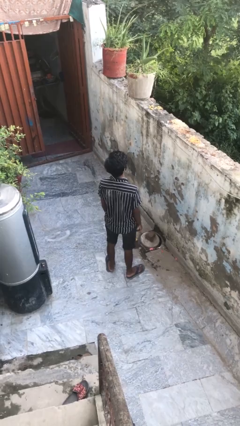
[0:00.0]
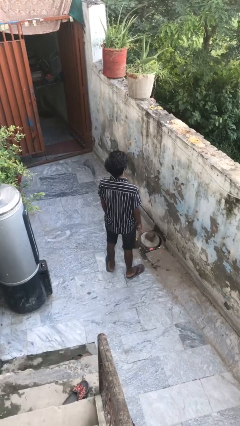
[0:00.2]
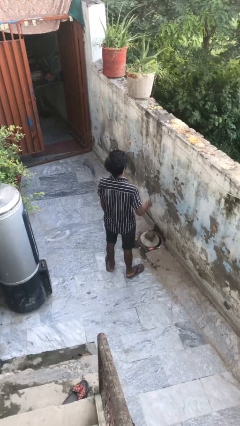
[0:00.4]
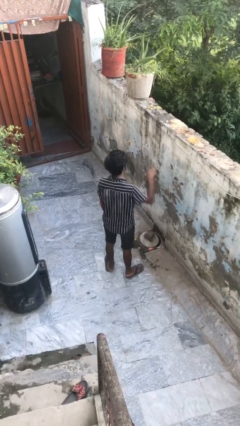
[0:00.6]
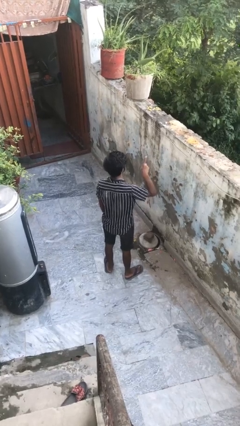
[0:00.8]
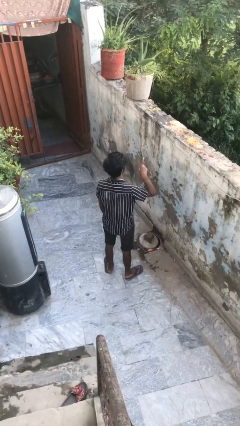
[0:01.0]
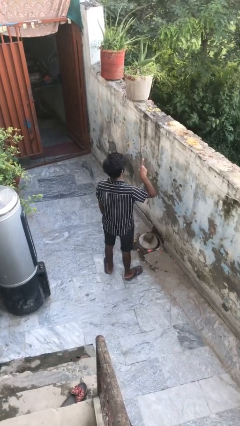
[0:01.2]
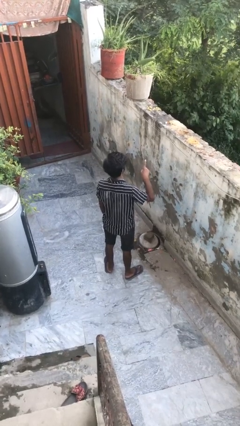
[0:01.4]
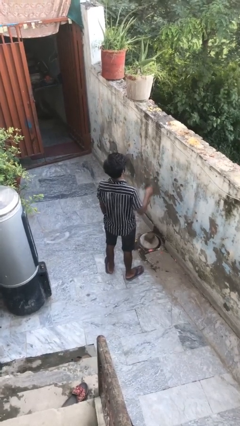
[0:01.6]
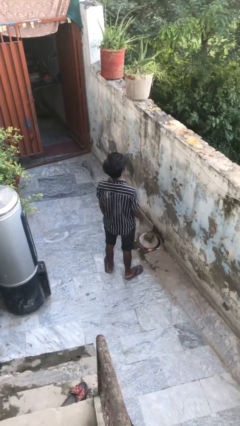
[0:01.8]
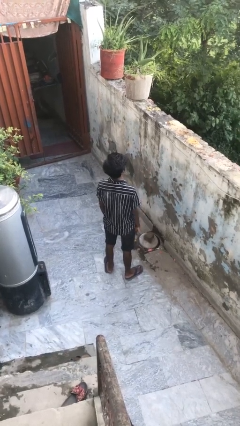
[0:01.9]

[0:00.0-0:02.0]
person gestures number one

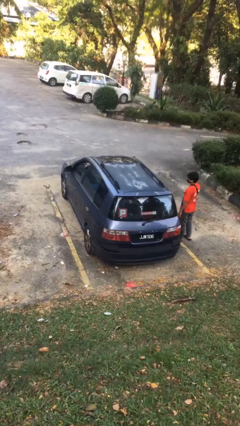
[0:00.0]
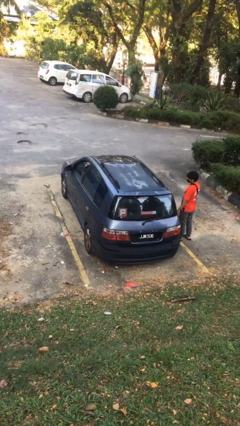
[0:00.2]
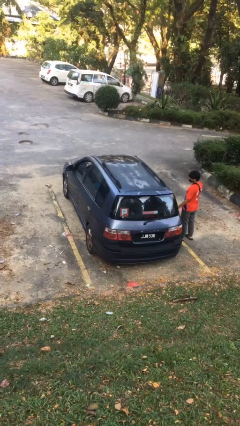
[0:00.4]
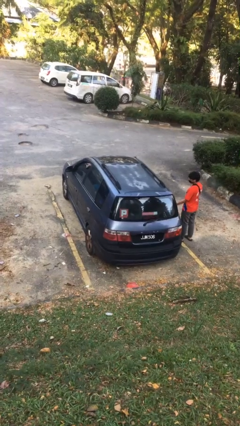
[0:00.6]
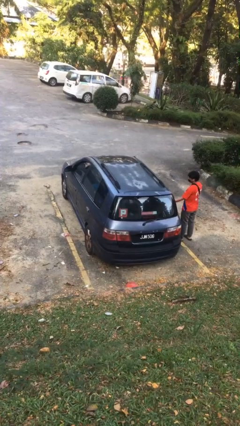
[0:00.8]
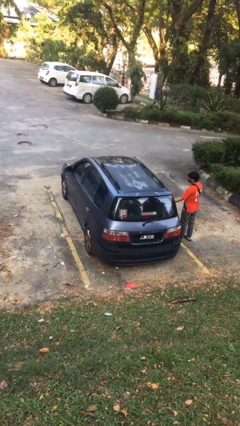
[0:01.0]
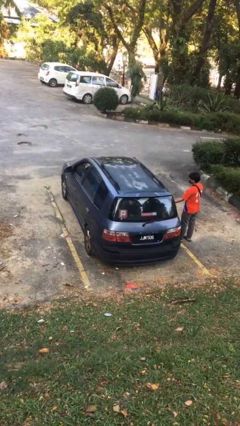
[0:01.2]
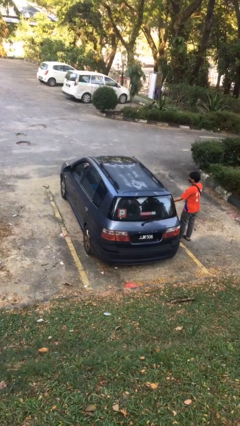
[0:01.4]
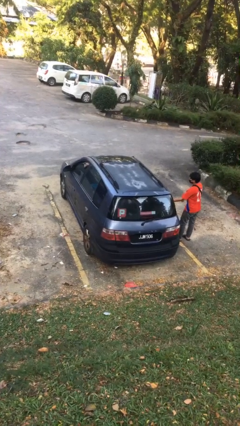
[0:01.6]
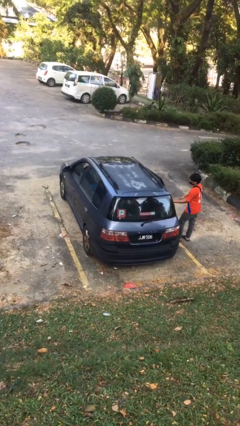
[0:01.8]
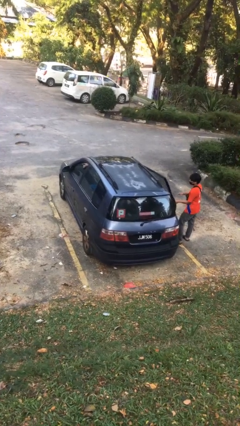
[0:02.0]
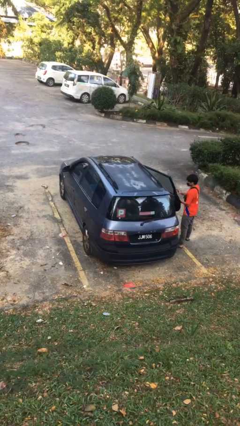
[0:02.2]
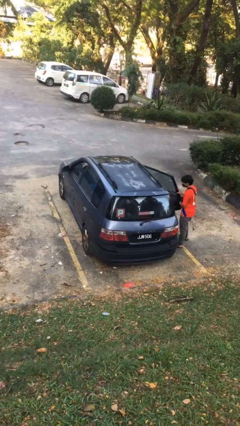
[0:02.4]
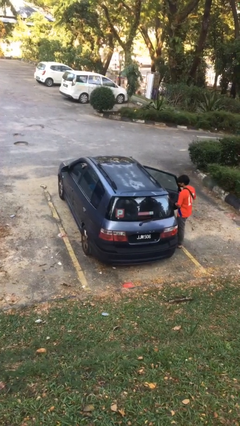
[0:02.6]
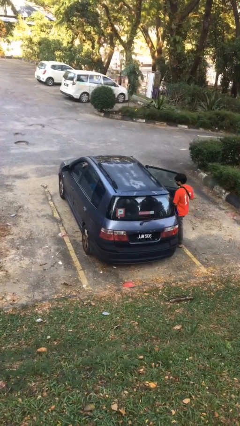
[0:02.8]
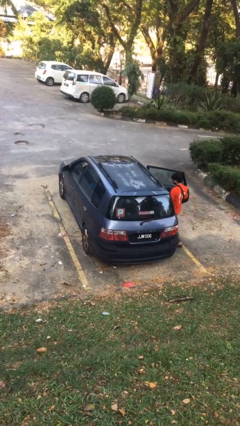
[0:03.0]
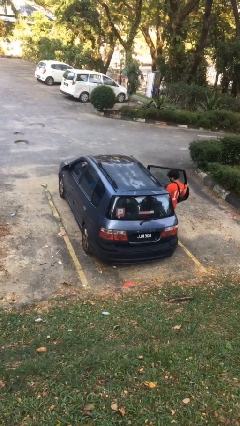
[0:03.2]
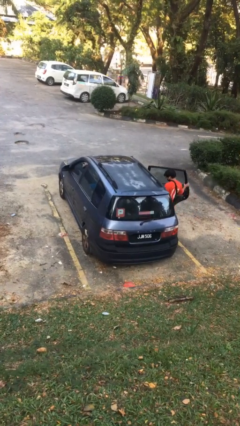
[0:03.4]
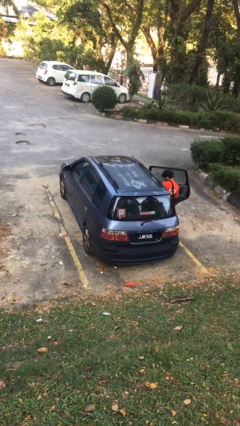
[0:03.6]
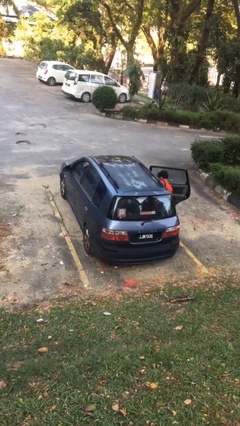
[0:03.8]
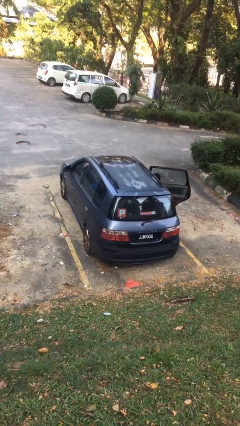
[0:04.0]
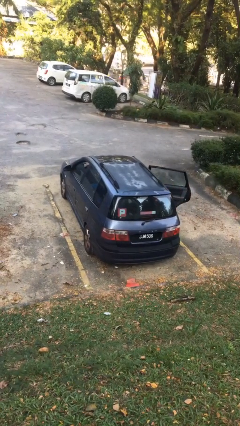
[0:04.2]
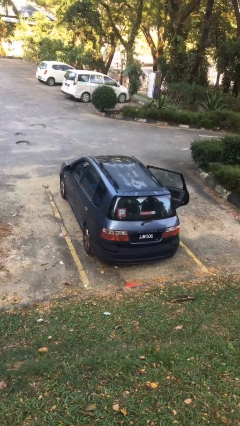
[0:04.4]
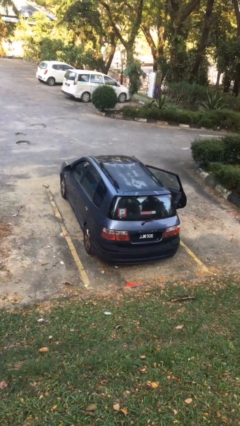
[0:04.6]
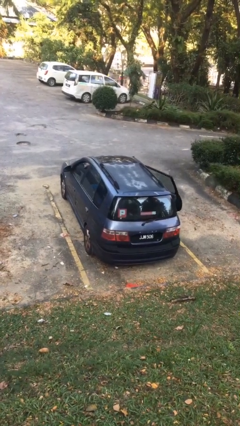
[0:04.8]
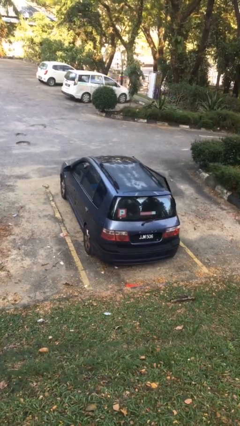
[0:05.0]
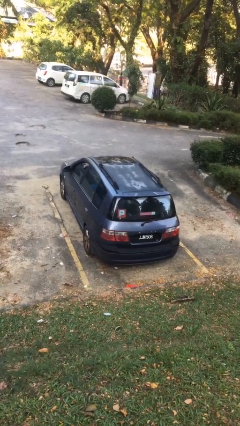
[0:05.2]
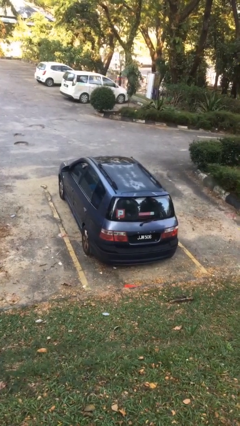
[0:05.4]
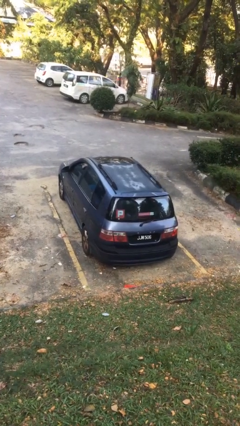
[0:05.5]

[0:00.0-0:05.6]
car picks up person

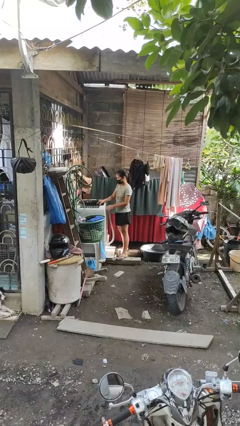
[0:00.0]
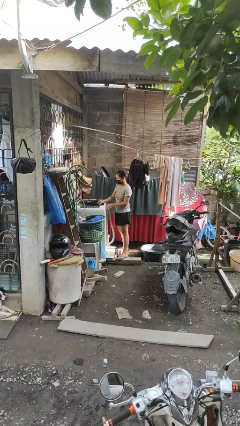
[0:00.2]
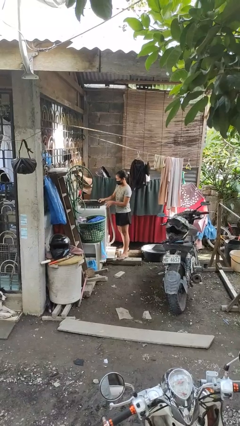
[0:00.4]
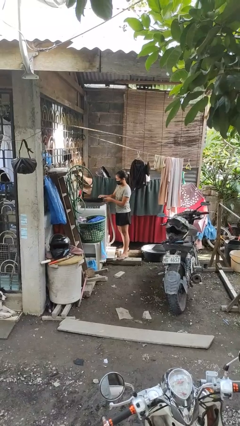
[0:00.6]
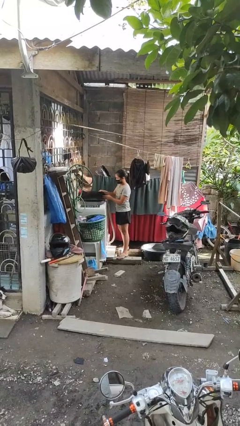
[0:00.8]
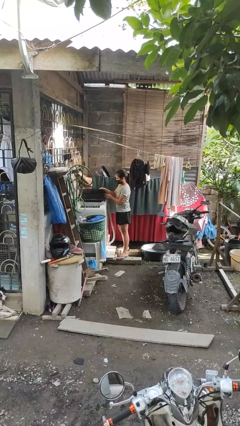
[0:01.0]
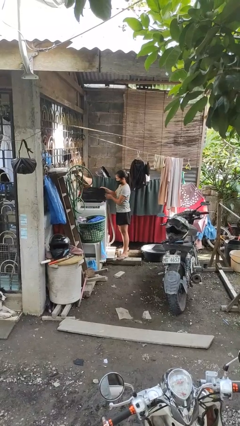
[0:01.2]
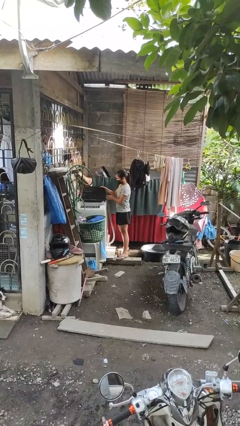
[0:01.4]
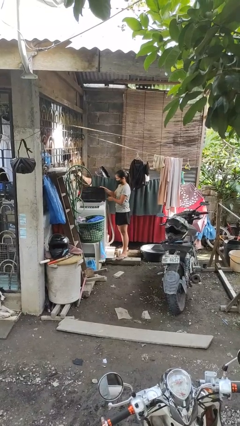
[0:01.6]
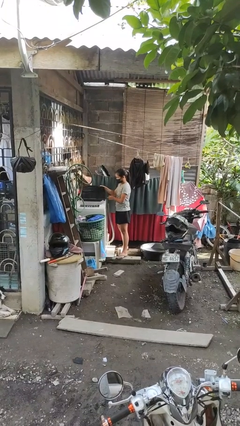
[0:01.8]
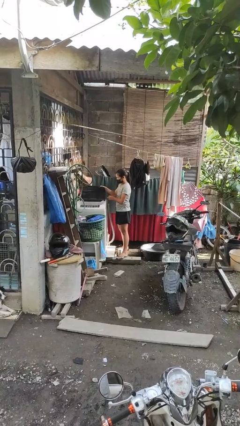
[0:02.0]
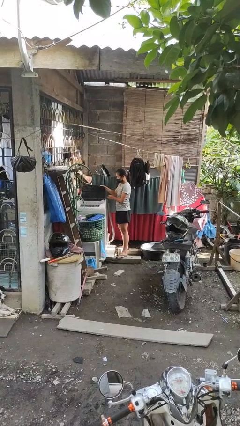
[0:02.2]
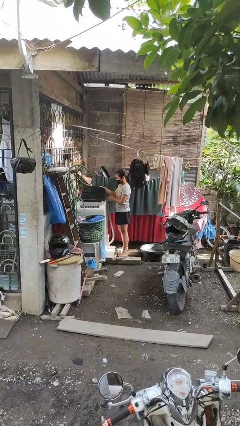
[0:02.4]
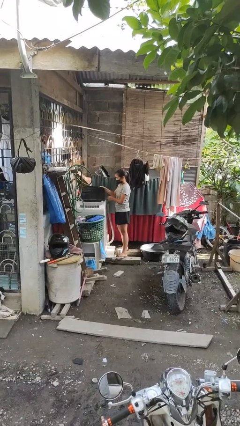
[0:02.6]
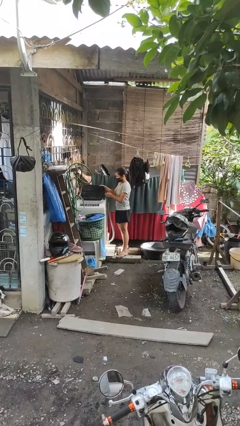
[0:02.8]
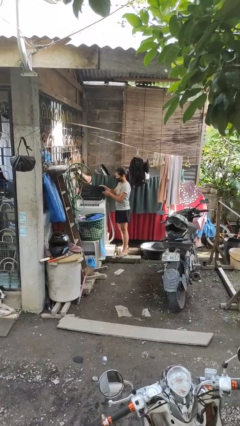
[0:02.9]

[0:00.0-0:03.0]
person opens clothes washer

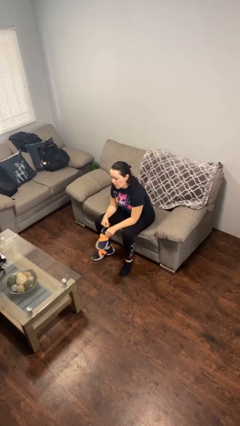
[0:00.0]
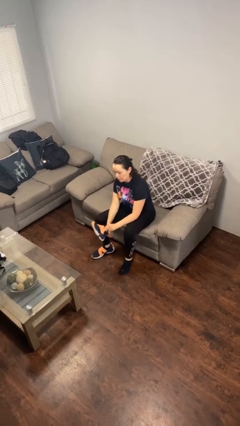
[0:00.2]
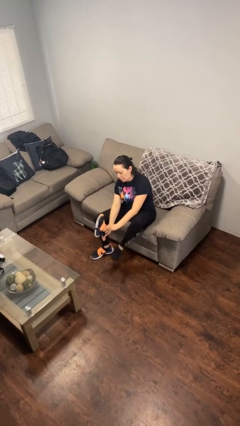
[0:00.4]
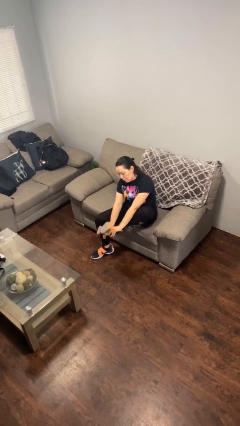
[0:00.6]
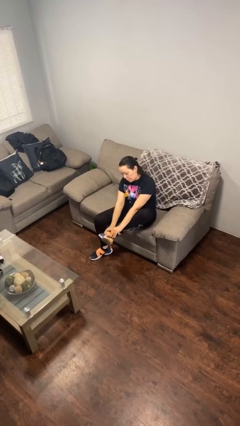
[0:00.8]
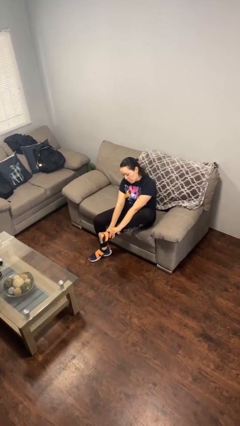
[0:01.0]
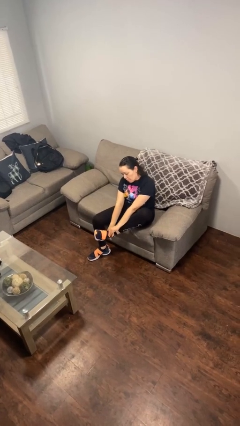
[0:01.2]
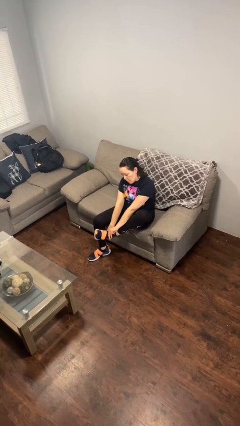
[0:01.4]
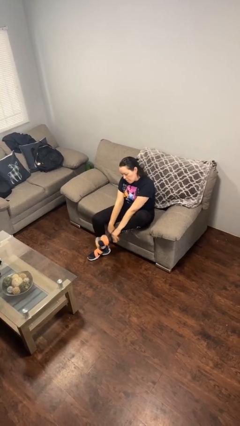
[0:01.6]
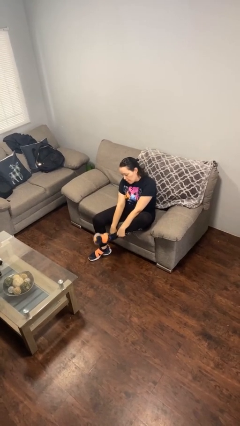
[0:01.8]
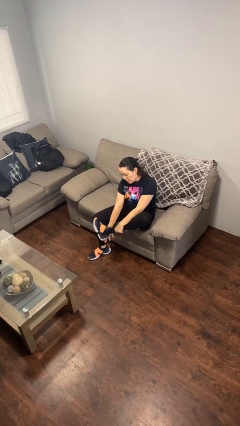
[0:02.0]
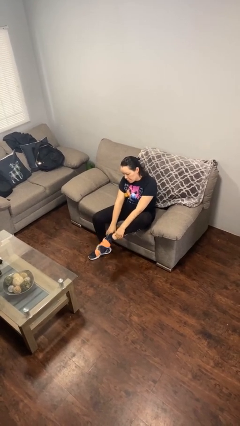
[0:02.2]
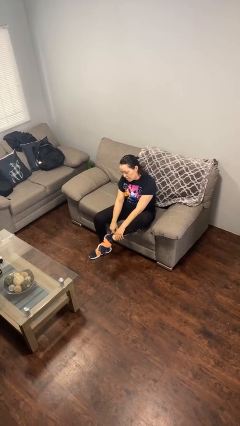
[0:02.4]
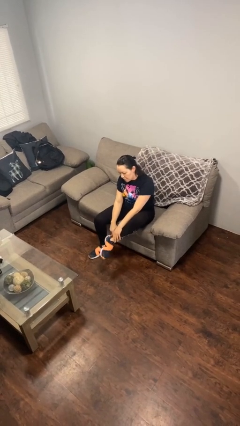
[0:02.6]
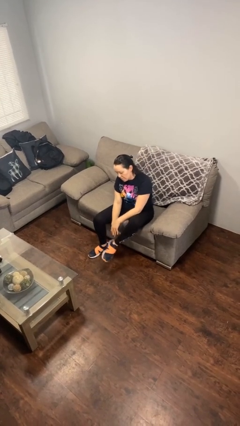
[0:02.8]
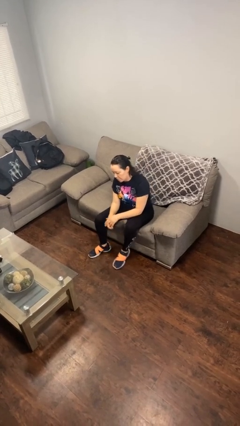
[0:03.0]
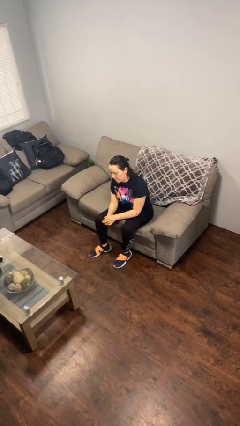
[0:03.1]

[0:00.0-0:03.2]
person puts on shoes

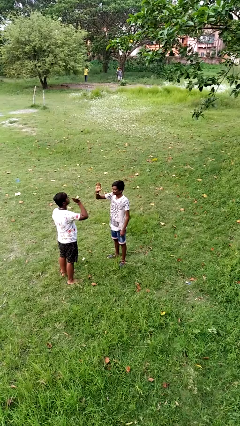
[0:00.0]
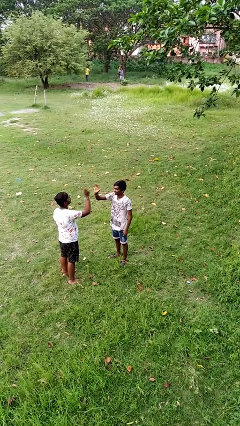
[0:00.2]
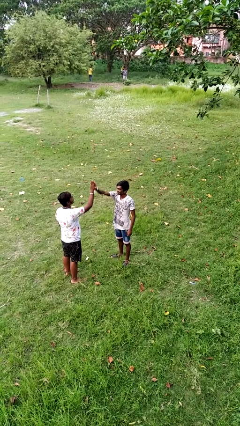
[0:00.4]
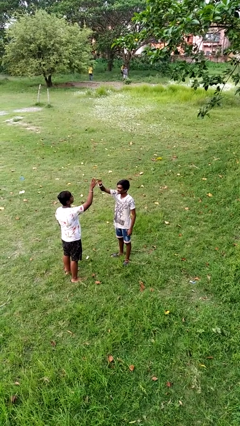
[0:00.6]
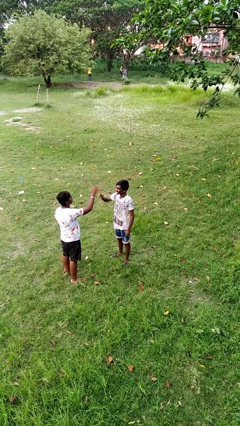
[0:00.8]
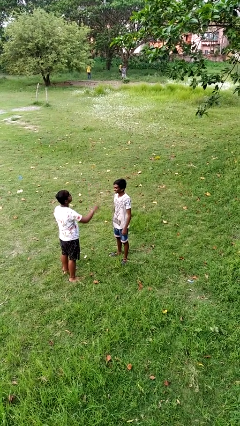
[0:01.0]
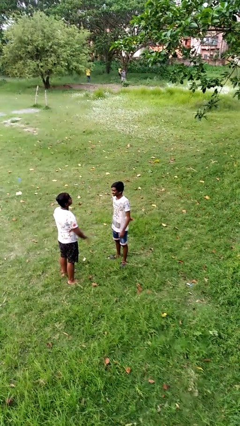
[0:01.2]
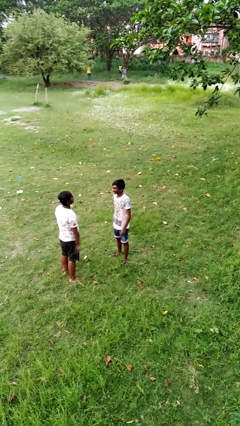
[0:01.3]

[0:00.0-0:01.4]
person highfives hand

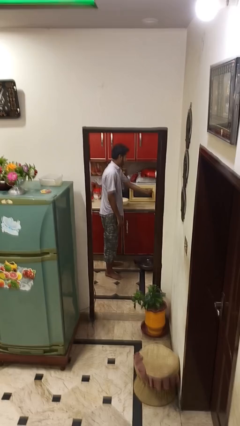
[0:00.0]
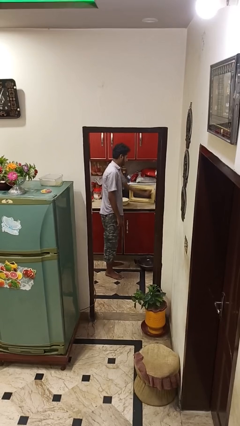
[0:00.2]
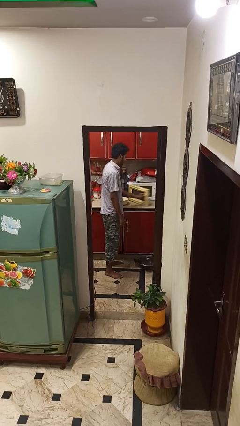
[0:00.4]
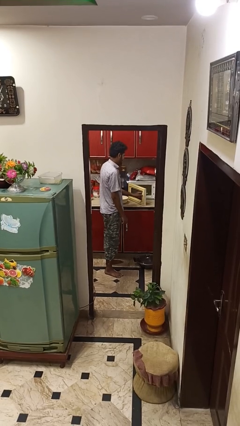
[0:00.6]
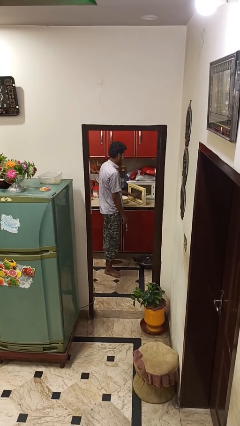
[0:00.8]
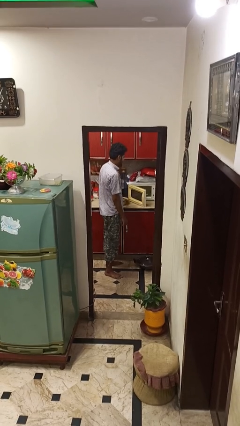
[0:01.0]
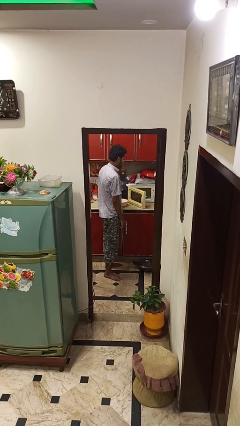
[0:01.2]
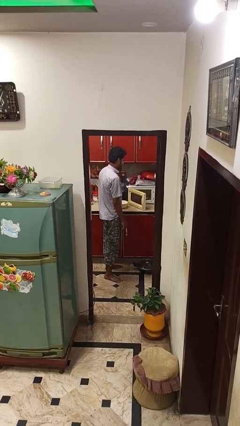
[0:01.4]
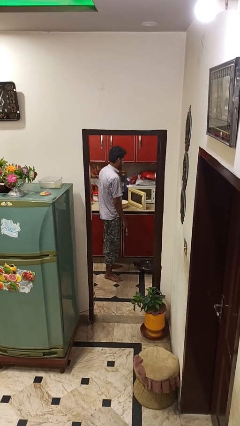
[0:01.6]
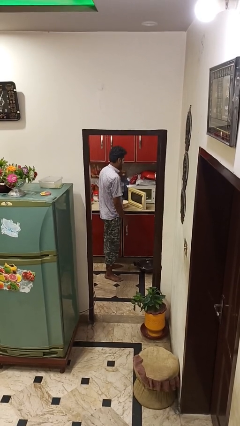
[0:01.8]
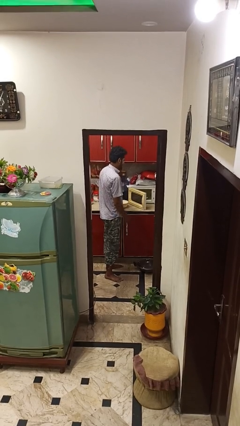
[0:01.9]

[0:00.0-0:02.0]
person opens microwave

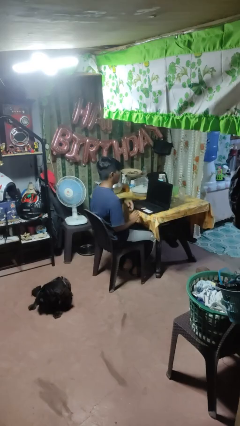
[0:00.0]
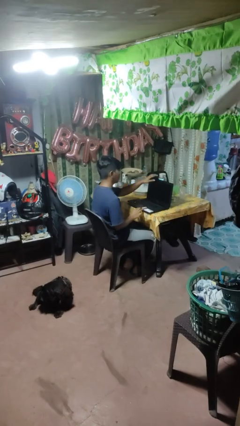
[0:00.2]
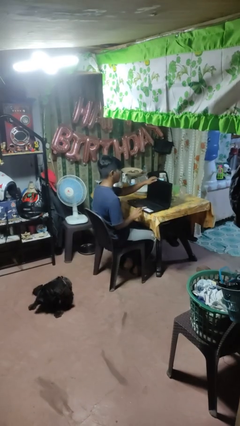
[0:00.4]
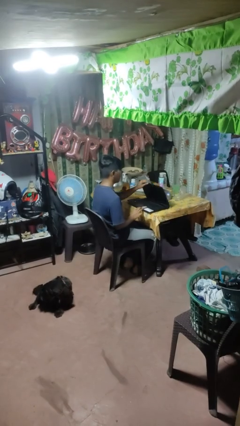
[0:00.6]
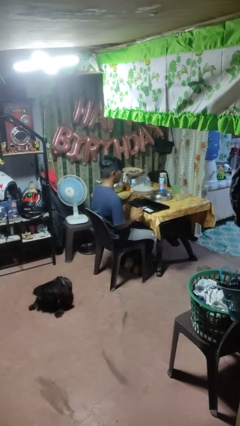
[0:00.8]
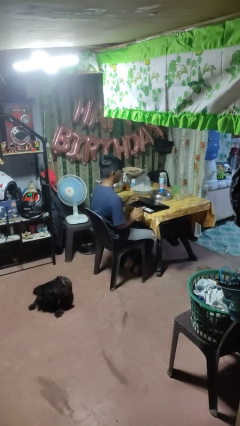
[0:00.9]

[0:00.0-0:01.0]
person closes laptop
